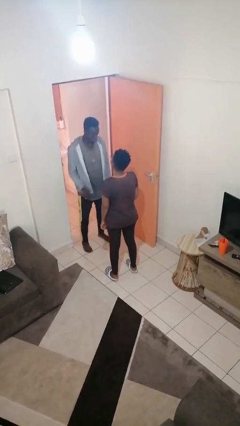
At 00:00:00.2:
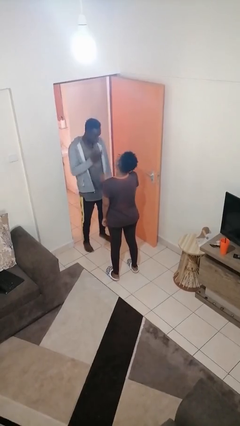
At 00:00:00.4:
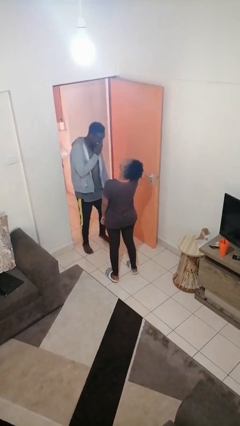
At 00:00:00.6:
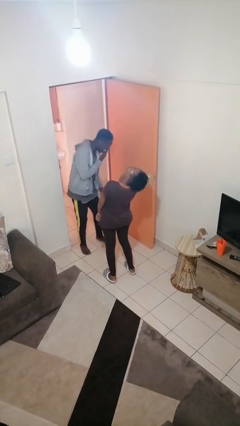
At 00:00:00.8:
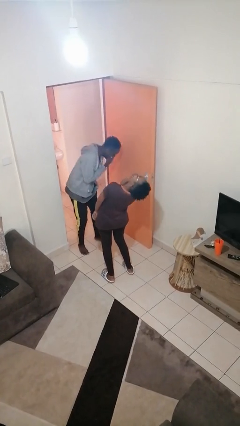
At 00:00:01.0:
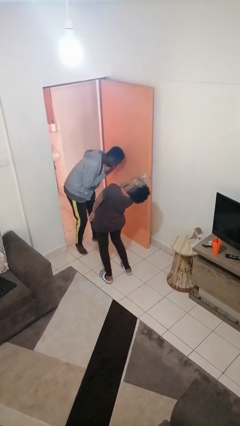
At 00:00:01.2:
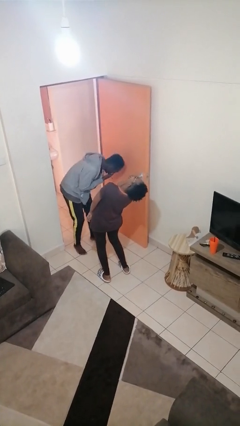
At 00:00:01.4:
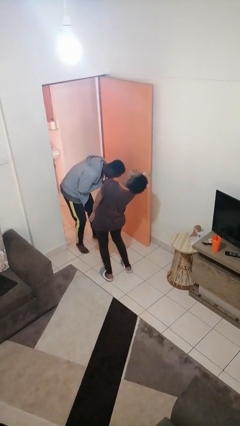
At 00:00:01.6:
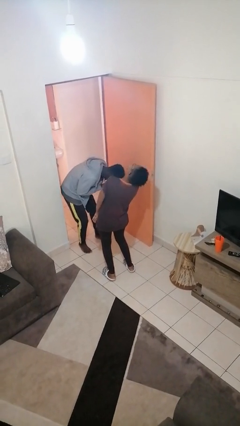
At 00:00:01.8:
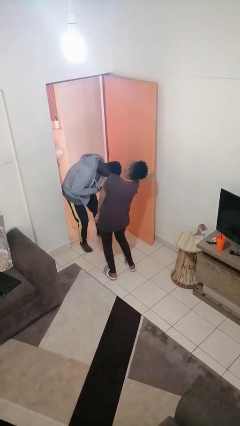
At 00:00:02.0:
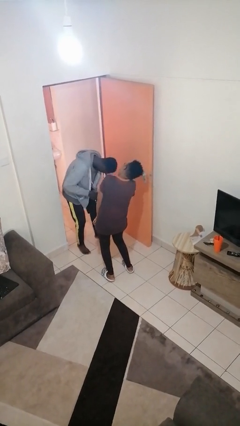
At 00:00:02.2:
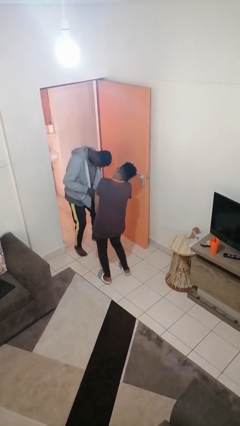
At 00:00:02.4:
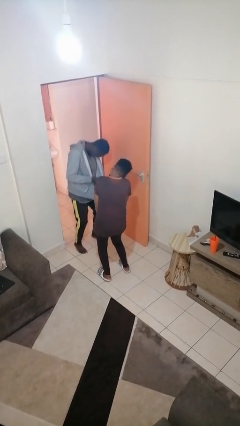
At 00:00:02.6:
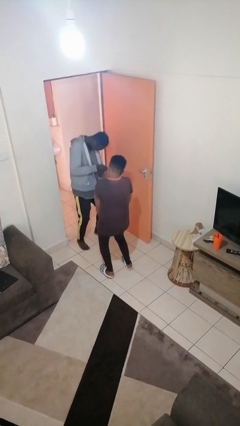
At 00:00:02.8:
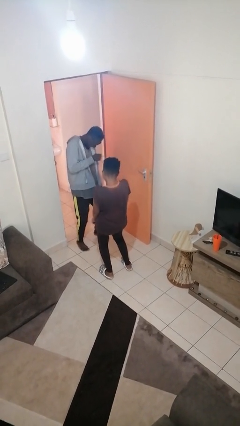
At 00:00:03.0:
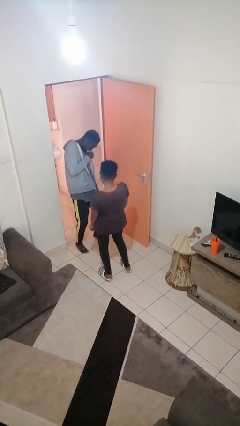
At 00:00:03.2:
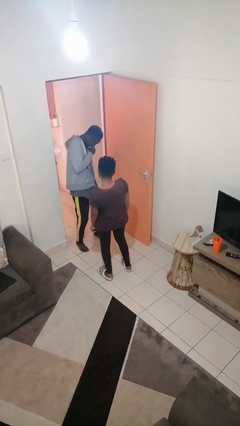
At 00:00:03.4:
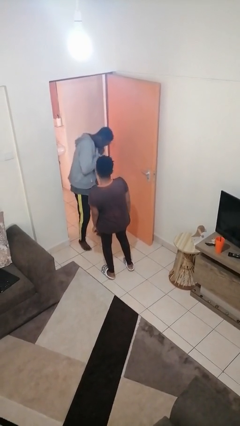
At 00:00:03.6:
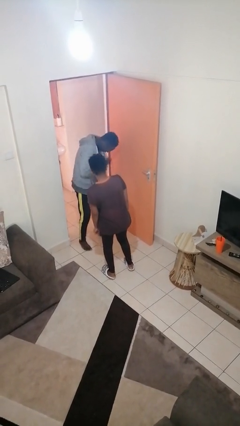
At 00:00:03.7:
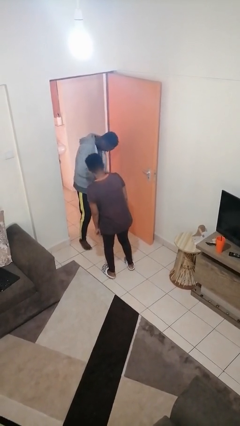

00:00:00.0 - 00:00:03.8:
person laughs with person

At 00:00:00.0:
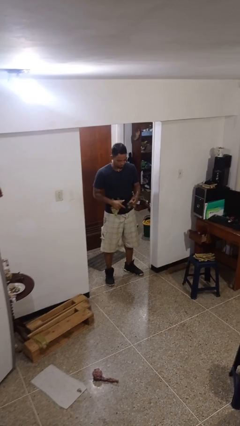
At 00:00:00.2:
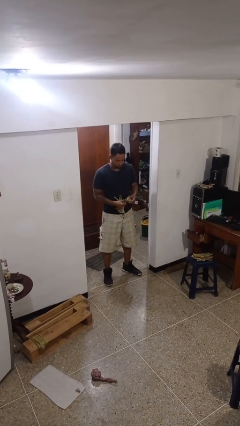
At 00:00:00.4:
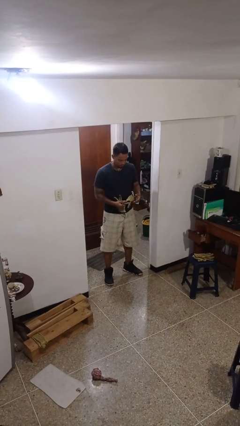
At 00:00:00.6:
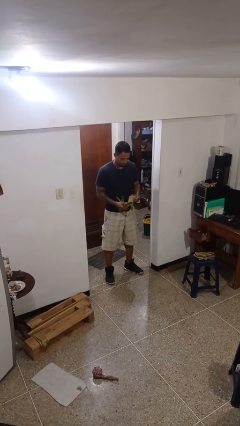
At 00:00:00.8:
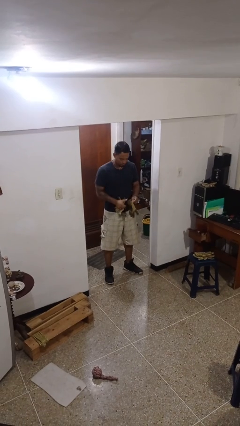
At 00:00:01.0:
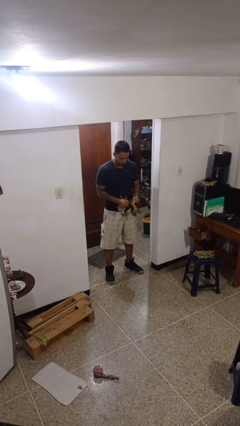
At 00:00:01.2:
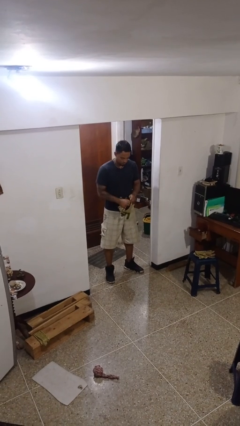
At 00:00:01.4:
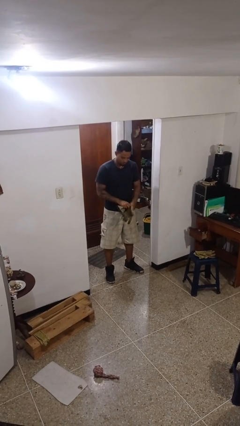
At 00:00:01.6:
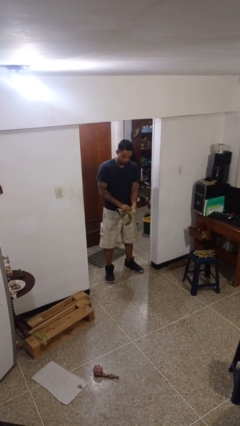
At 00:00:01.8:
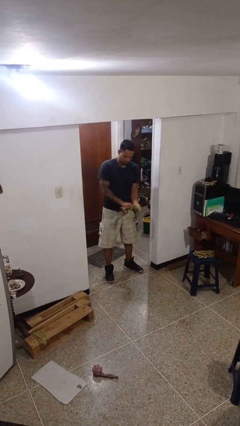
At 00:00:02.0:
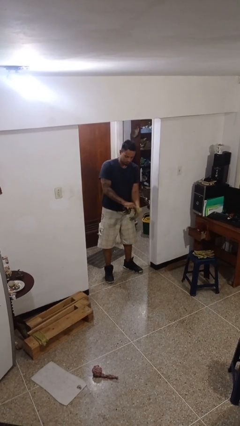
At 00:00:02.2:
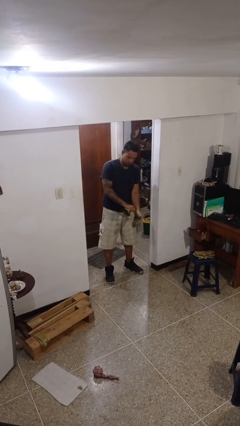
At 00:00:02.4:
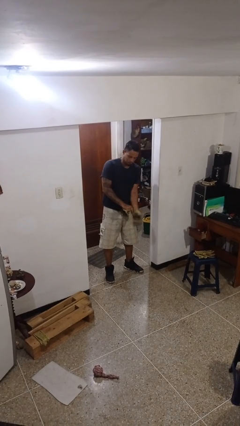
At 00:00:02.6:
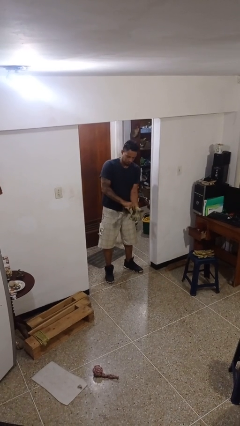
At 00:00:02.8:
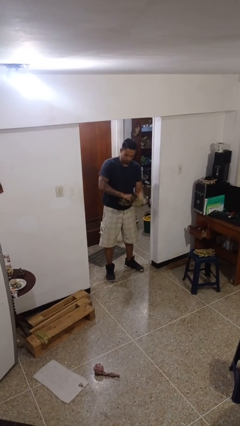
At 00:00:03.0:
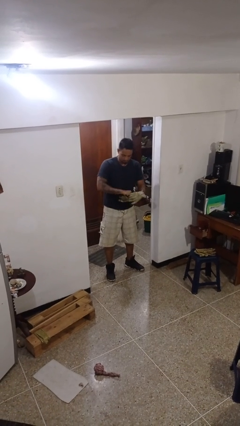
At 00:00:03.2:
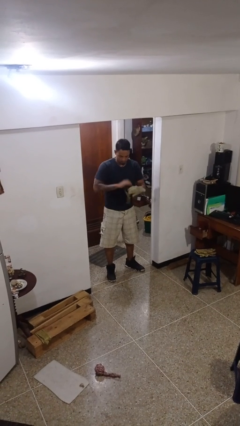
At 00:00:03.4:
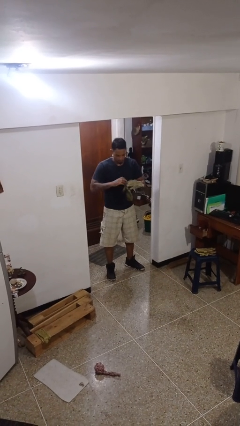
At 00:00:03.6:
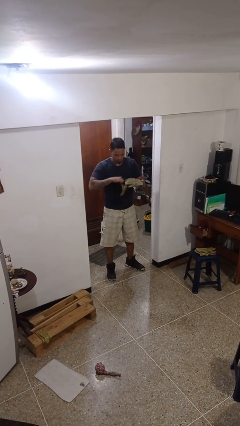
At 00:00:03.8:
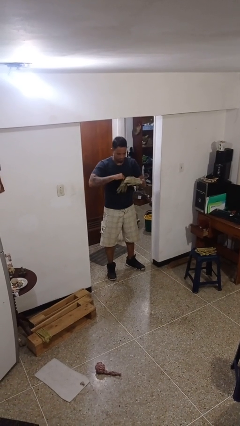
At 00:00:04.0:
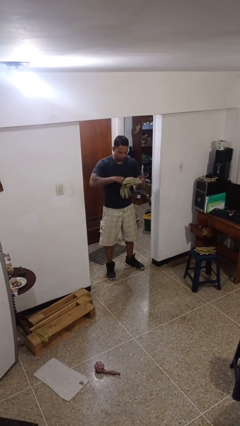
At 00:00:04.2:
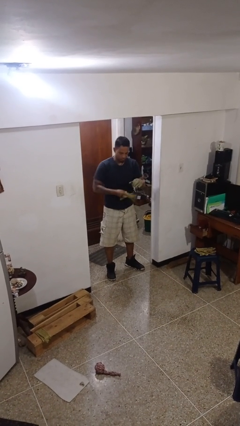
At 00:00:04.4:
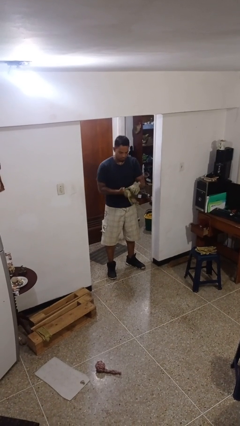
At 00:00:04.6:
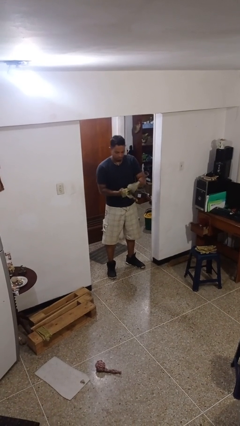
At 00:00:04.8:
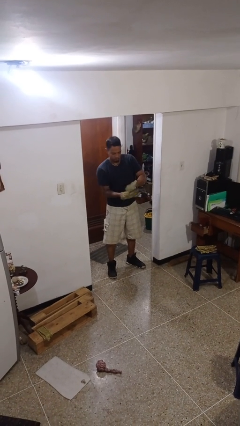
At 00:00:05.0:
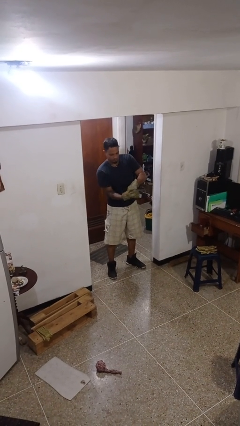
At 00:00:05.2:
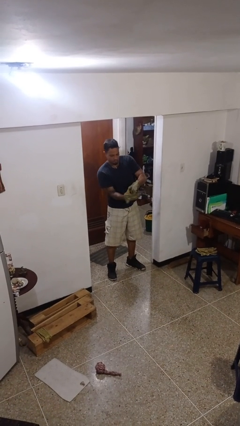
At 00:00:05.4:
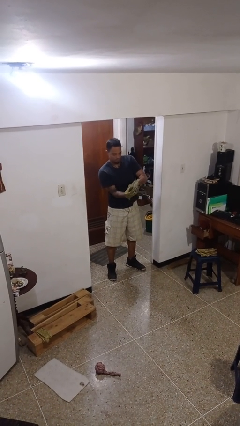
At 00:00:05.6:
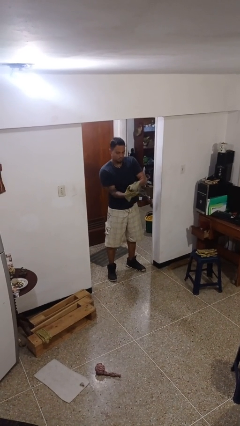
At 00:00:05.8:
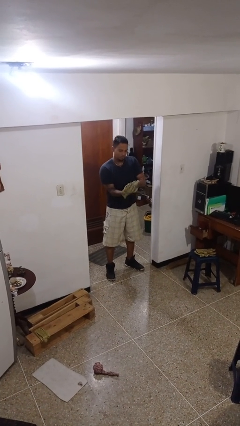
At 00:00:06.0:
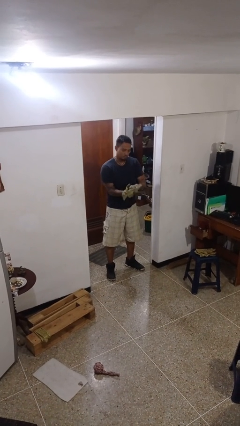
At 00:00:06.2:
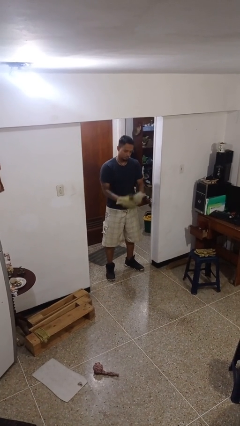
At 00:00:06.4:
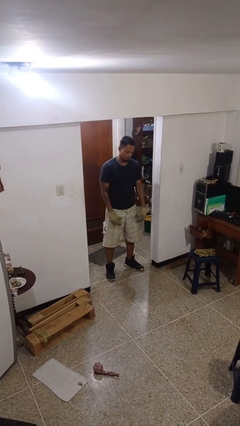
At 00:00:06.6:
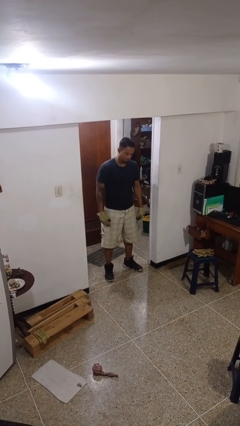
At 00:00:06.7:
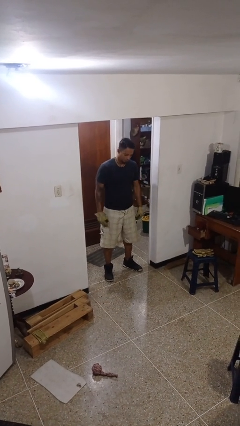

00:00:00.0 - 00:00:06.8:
person puts on gloves

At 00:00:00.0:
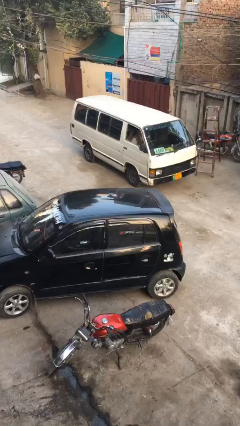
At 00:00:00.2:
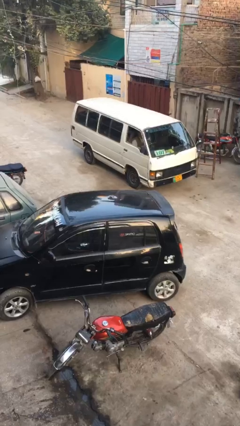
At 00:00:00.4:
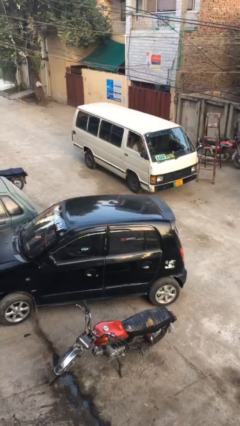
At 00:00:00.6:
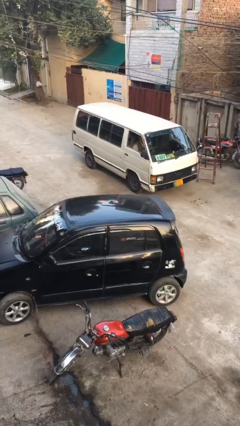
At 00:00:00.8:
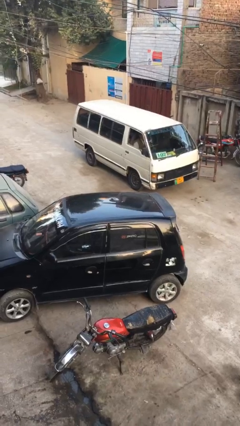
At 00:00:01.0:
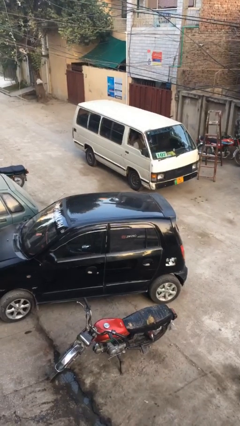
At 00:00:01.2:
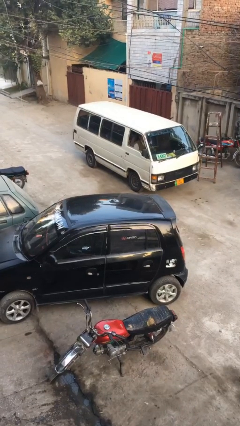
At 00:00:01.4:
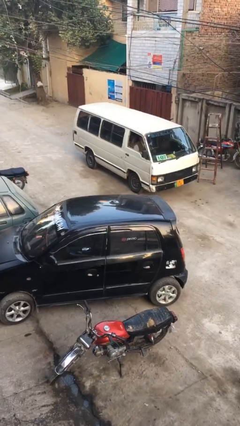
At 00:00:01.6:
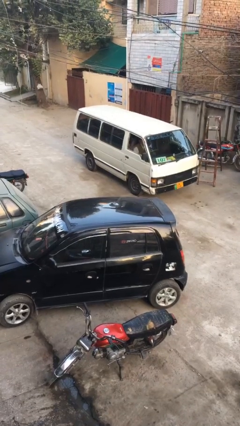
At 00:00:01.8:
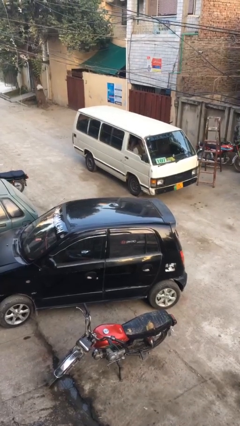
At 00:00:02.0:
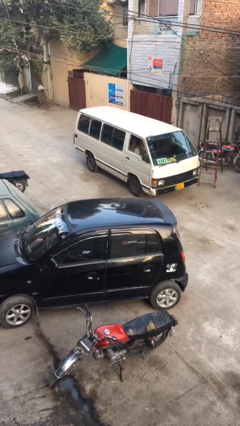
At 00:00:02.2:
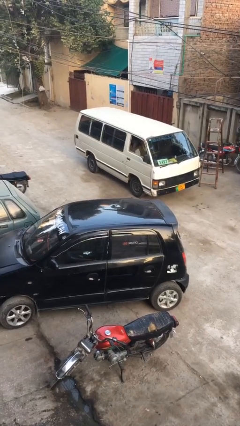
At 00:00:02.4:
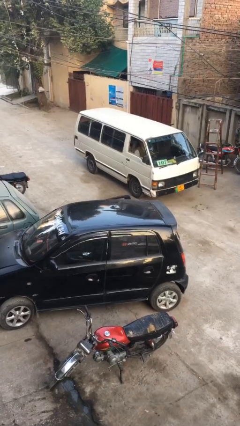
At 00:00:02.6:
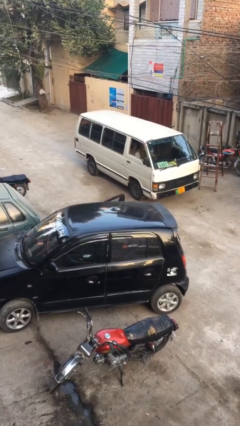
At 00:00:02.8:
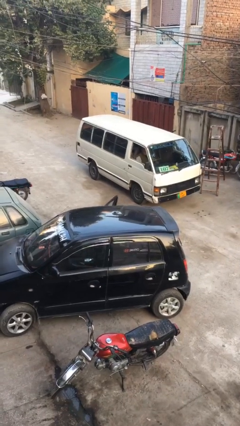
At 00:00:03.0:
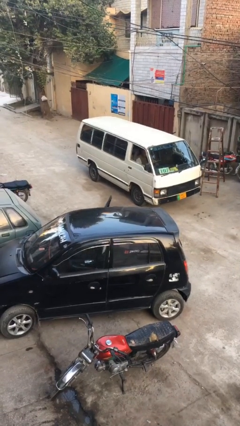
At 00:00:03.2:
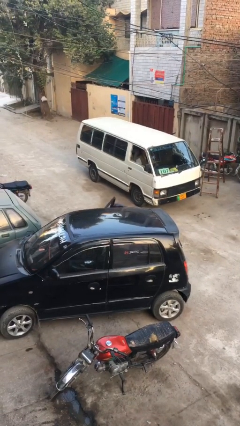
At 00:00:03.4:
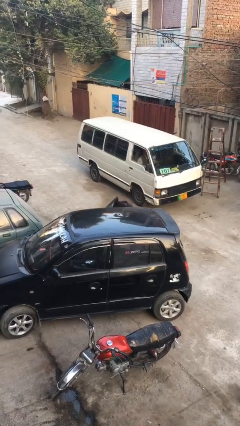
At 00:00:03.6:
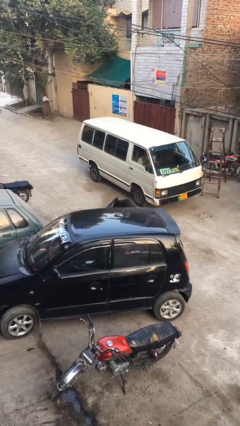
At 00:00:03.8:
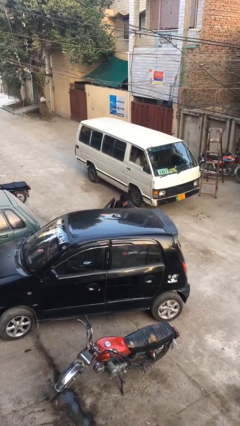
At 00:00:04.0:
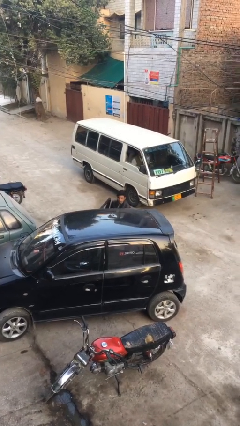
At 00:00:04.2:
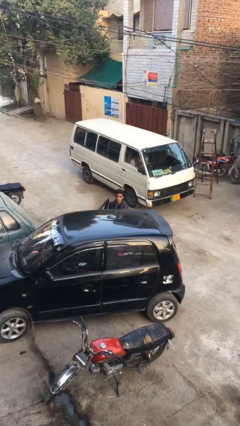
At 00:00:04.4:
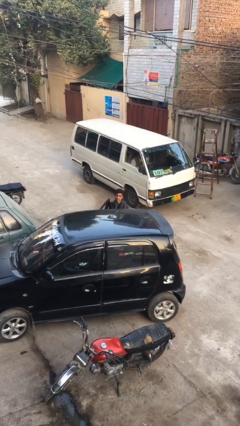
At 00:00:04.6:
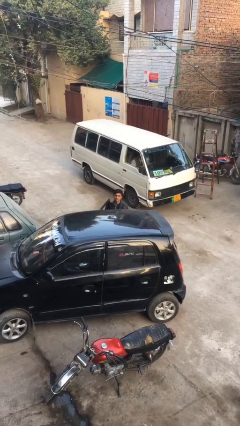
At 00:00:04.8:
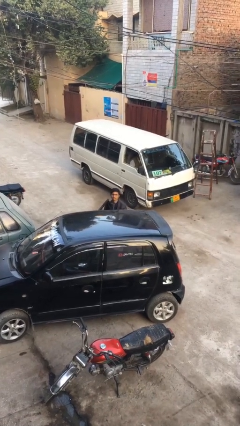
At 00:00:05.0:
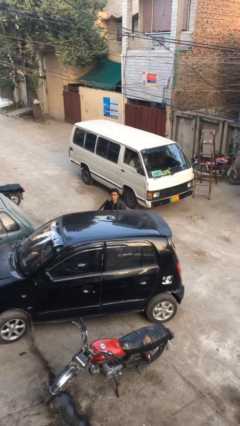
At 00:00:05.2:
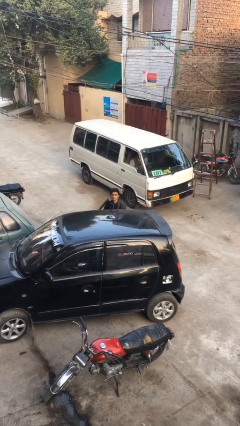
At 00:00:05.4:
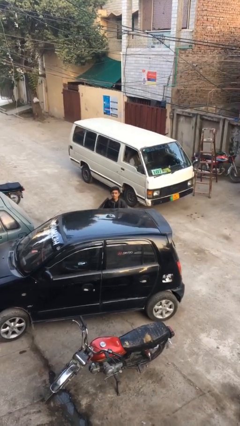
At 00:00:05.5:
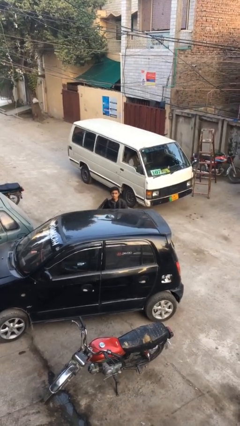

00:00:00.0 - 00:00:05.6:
person exits car

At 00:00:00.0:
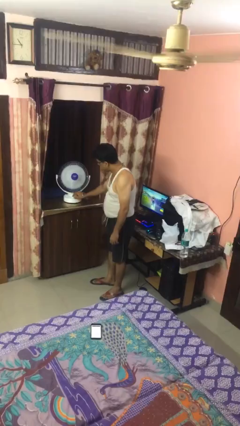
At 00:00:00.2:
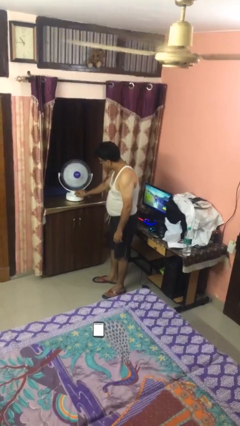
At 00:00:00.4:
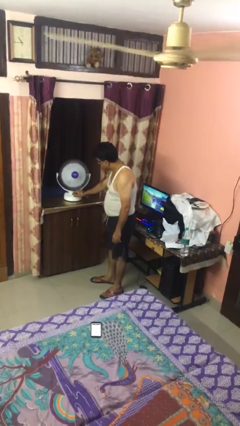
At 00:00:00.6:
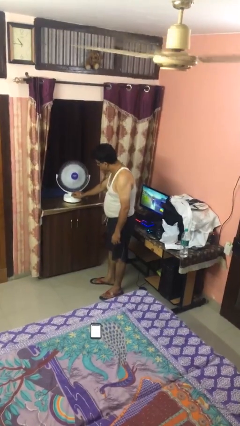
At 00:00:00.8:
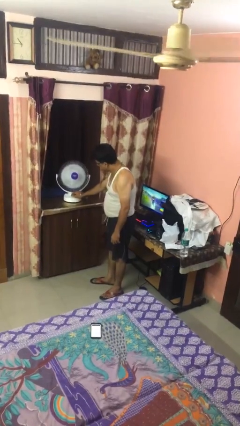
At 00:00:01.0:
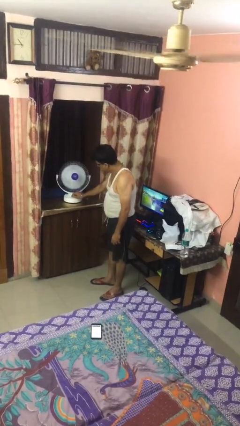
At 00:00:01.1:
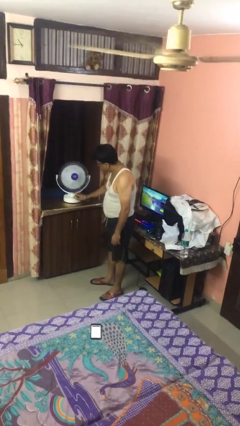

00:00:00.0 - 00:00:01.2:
person turns off fan
